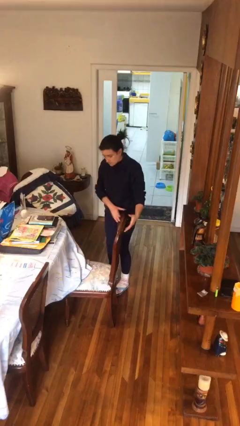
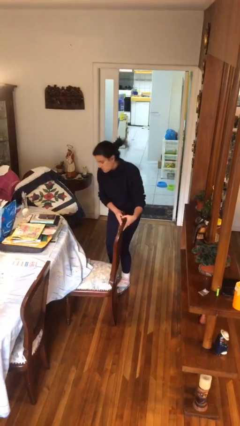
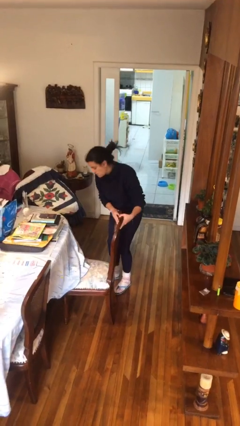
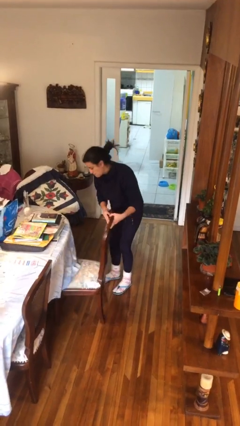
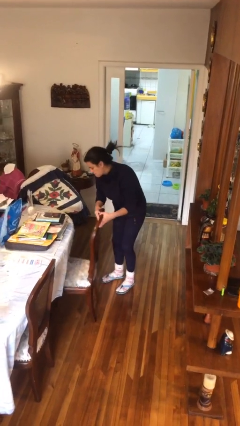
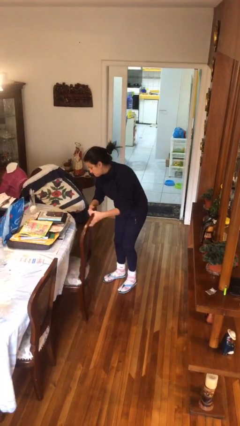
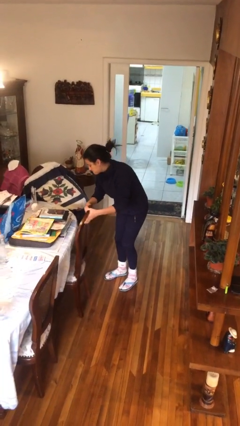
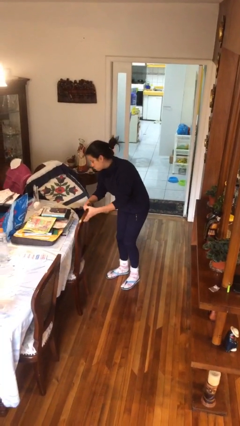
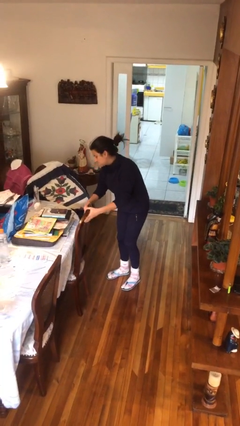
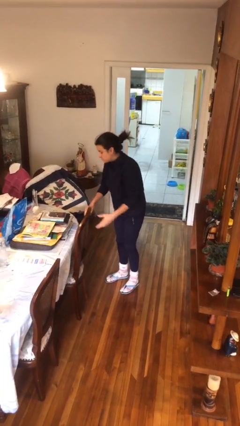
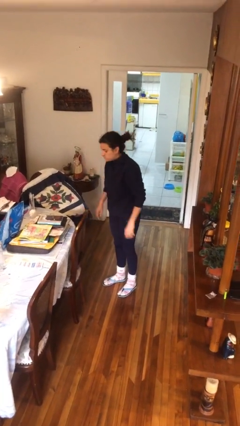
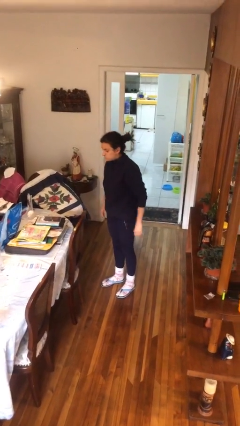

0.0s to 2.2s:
person pushes in chair

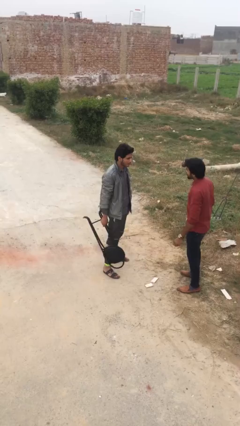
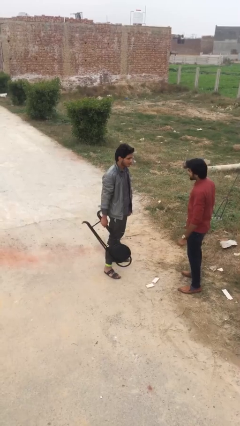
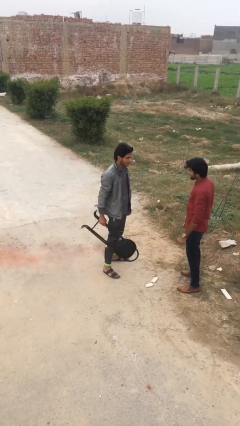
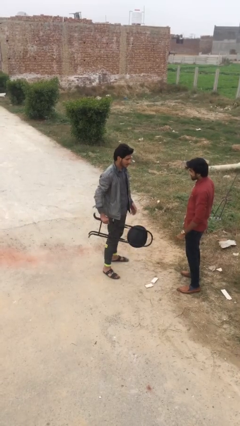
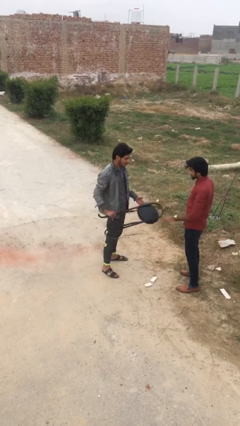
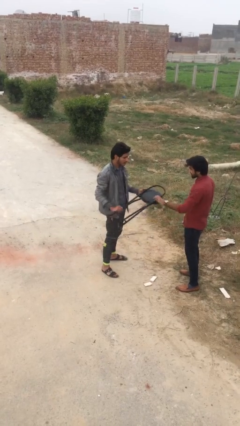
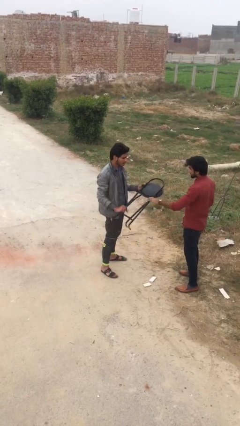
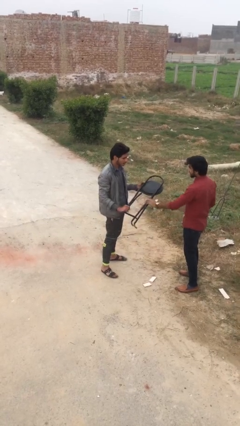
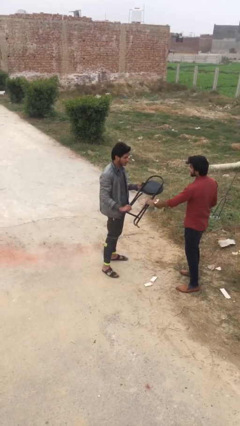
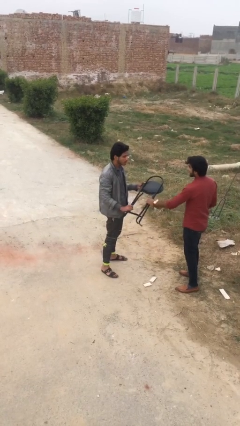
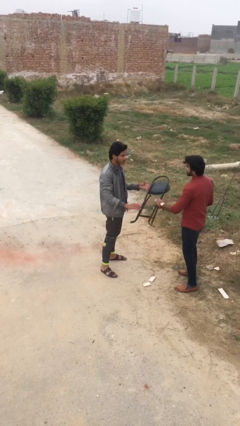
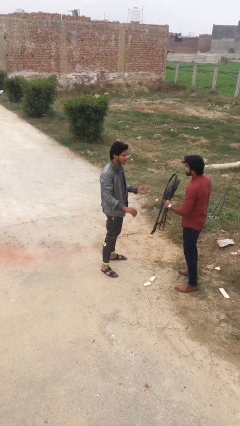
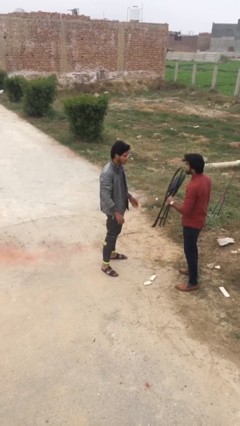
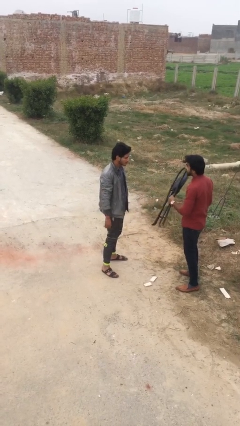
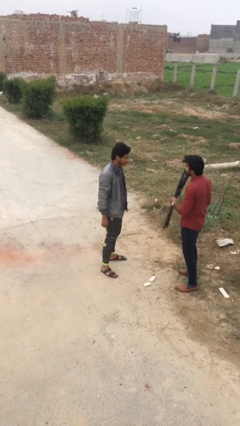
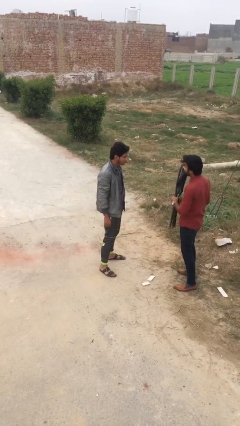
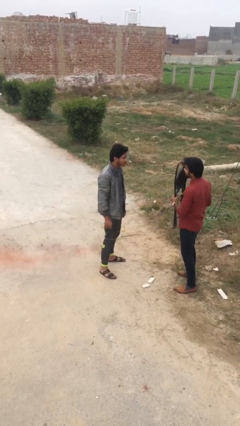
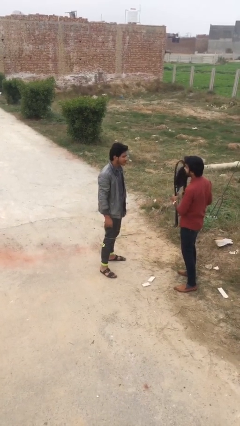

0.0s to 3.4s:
person transfers object to person

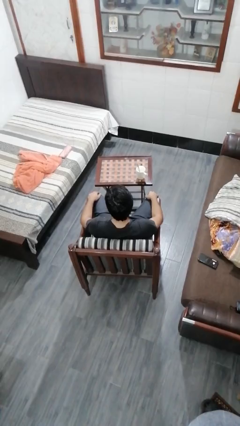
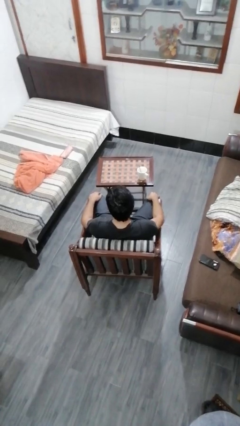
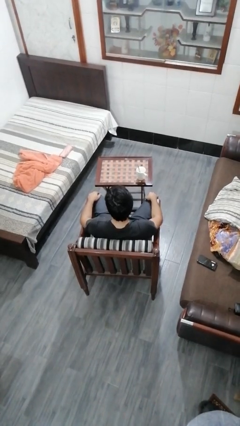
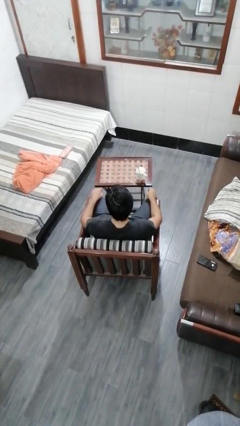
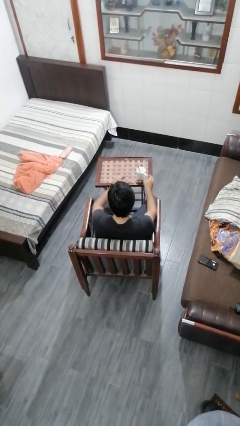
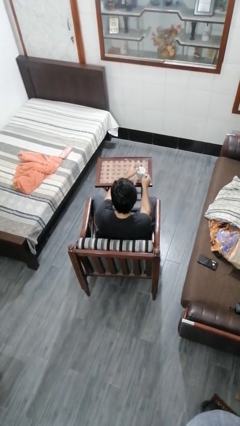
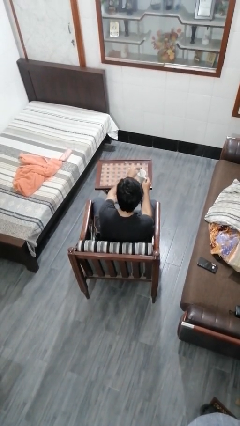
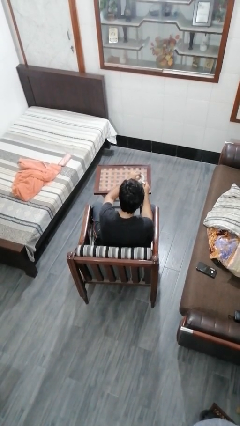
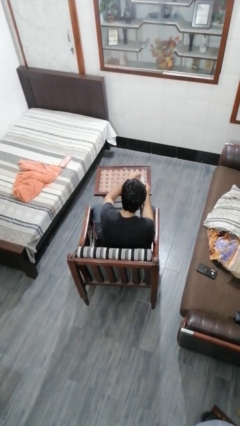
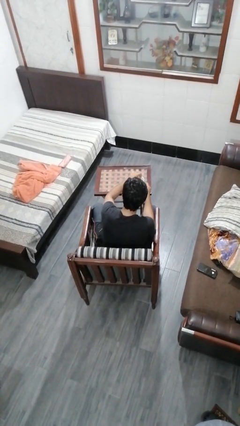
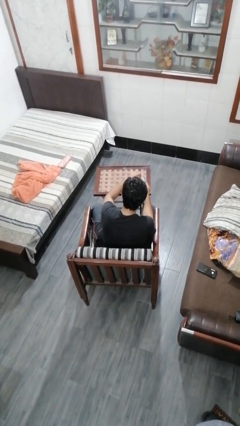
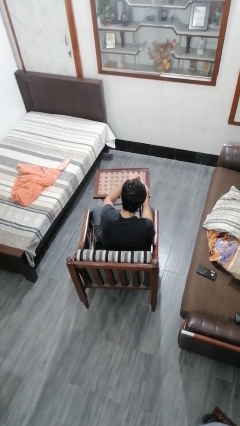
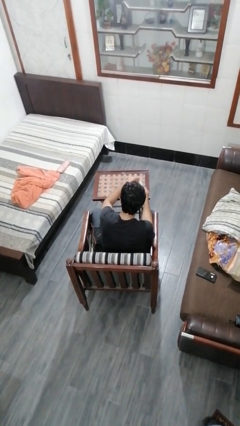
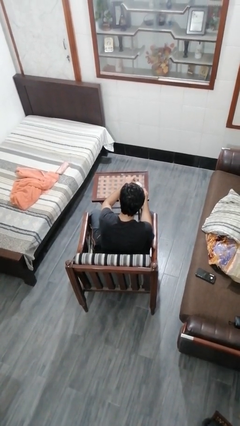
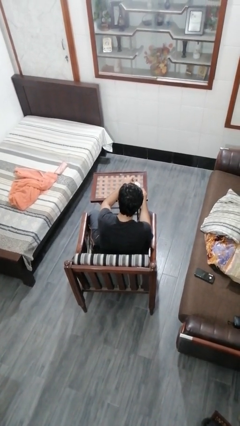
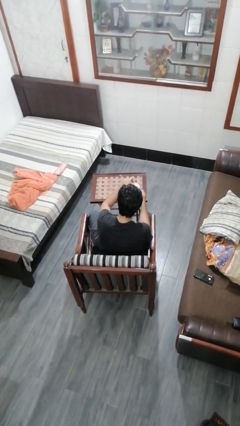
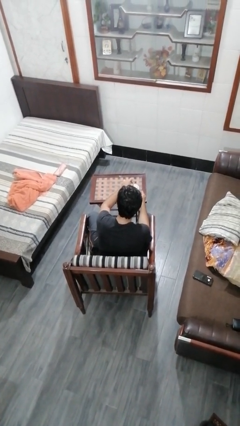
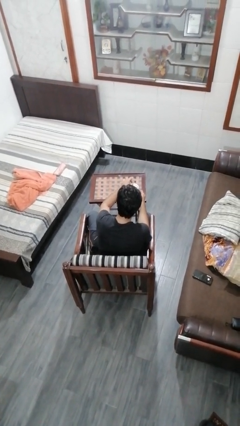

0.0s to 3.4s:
person stirs mug

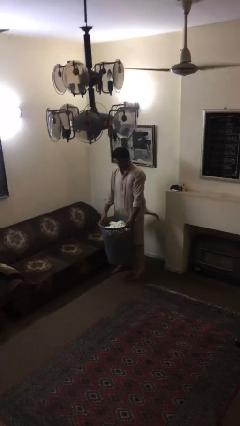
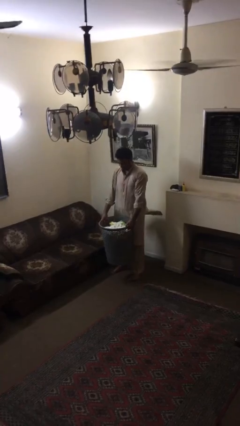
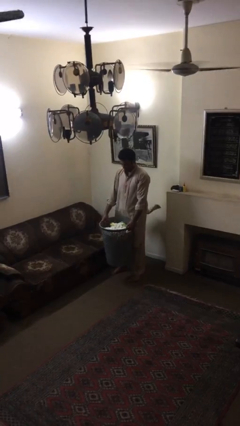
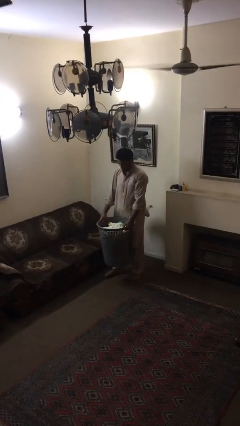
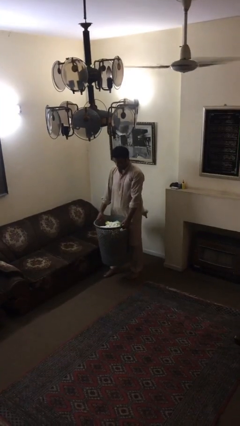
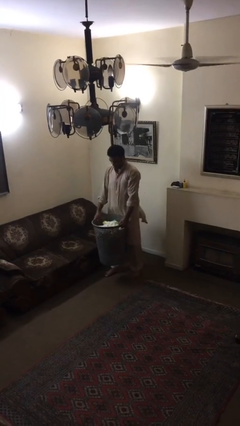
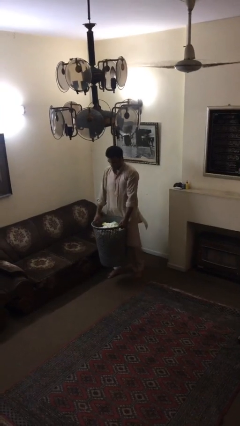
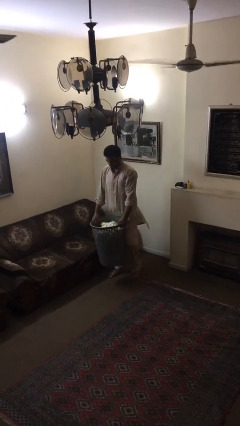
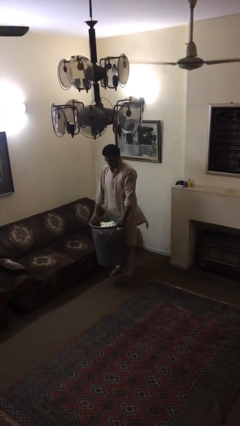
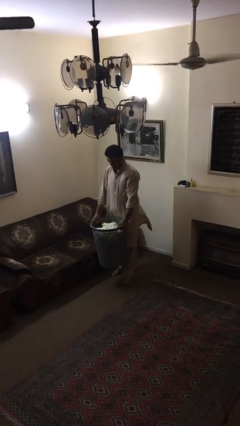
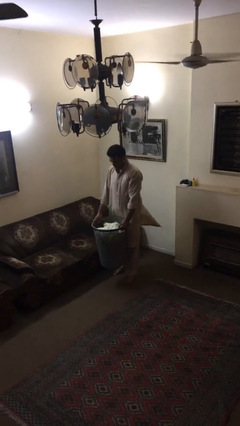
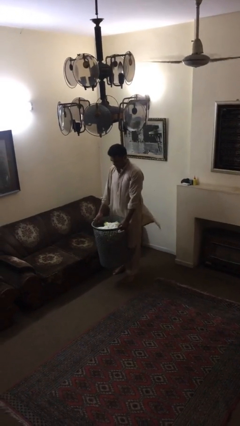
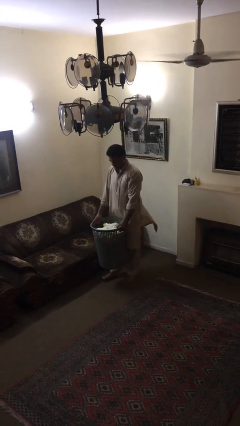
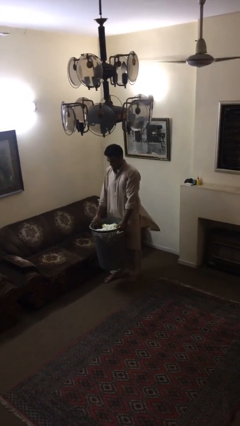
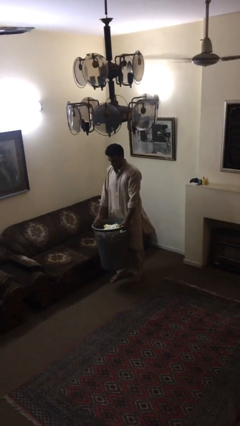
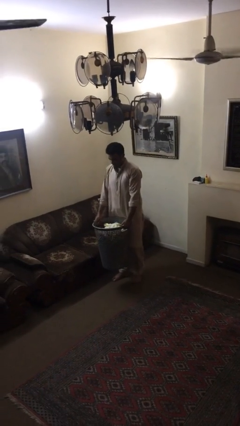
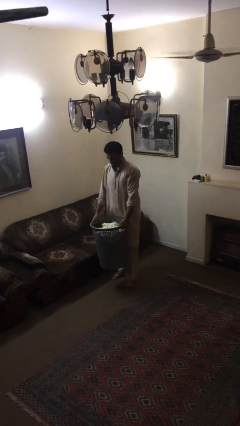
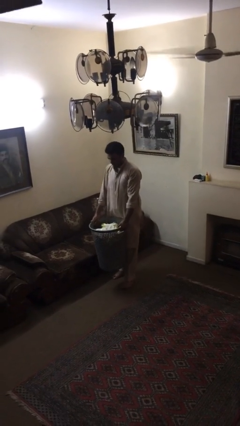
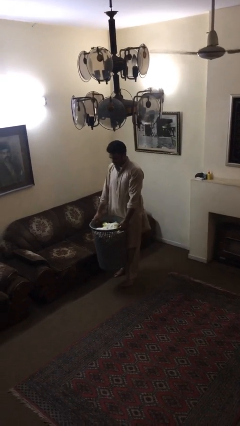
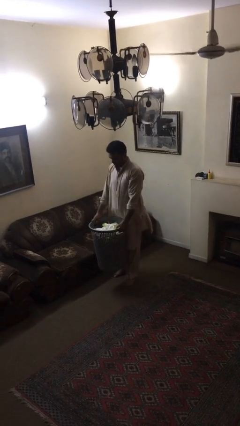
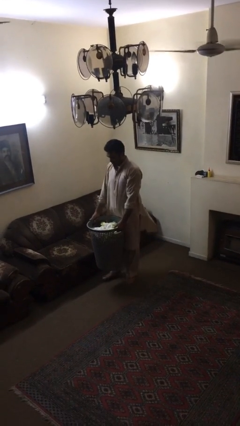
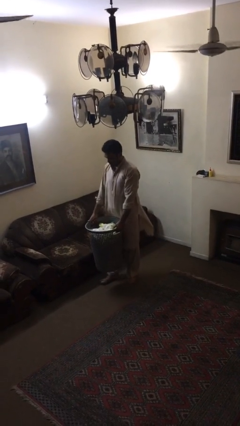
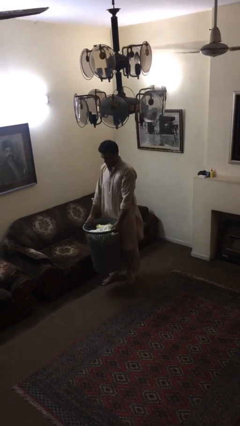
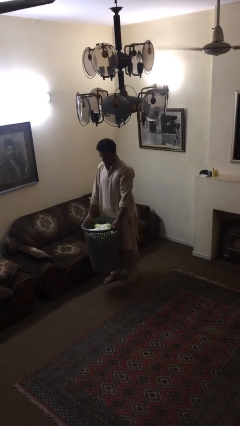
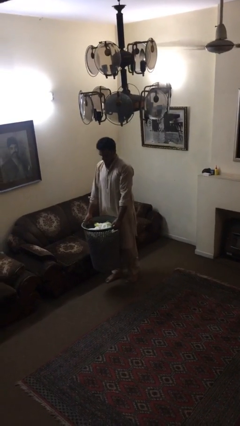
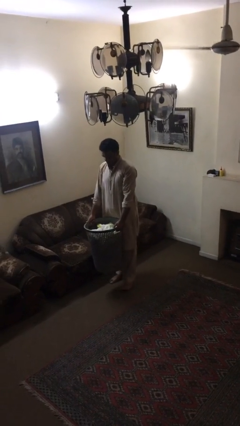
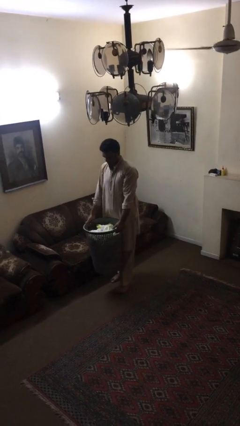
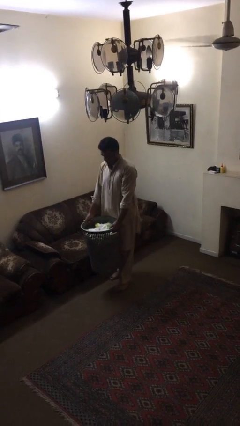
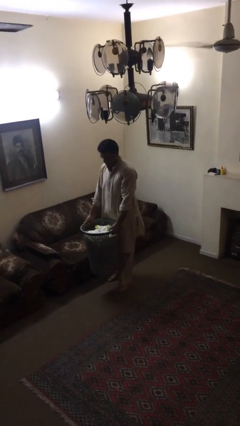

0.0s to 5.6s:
person carries heavy object

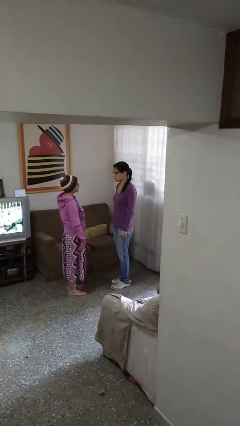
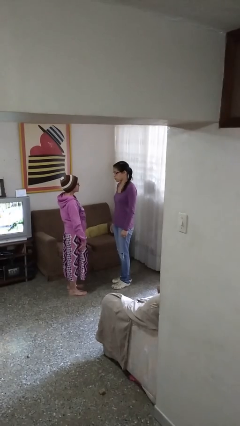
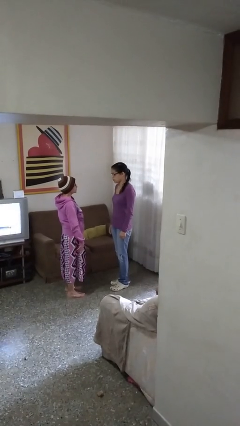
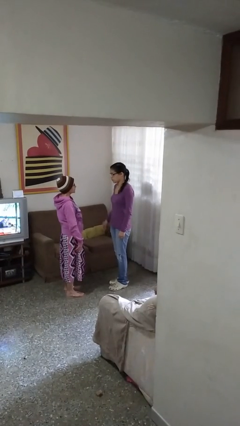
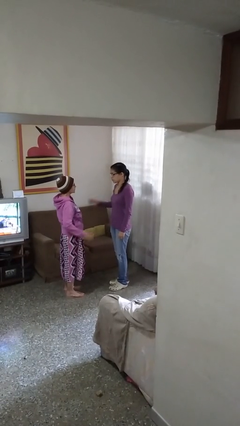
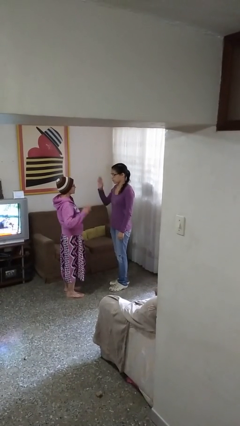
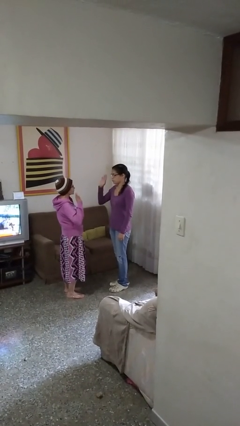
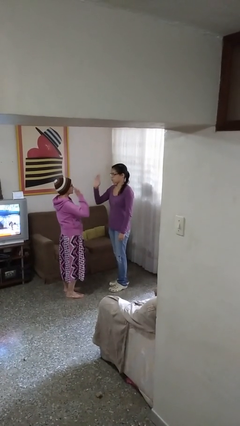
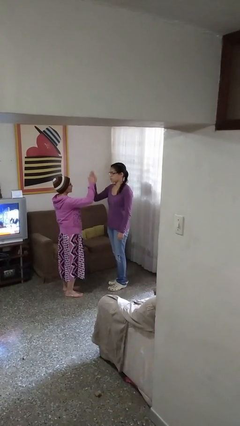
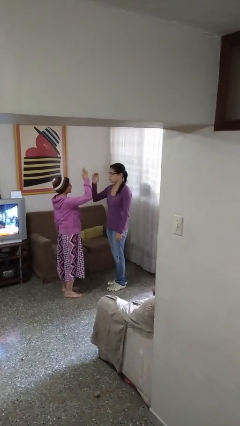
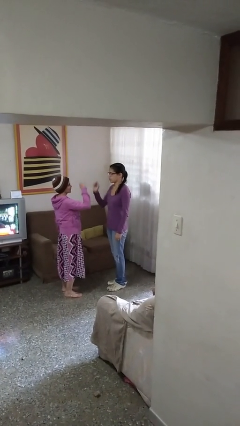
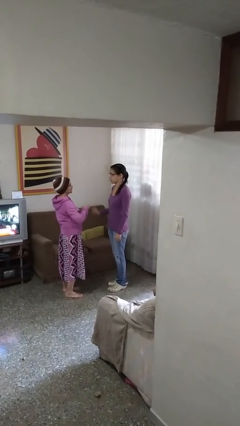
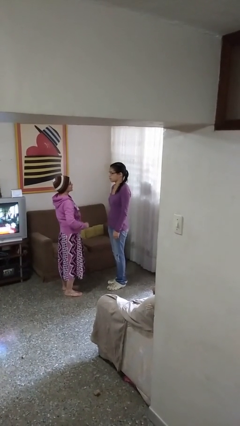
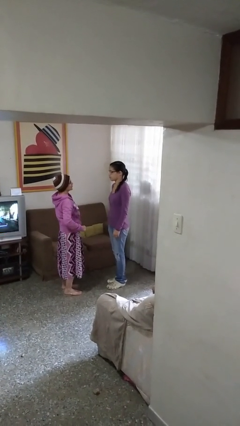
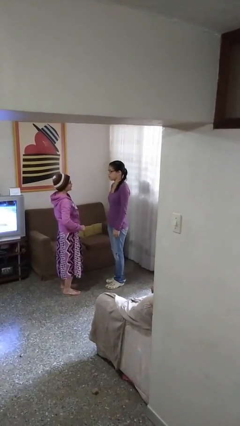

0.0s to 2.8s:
person highfives hand

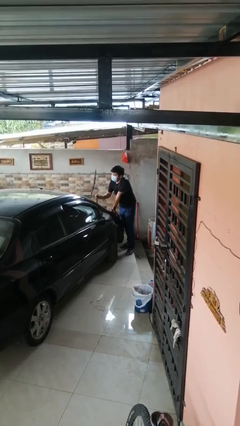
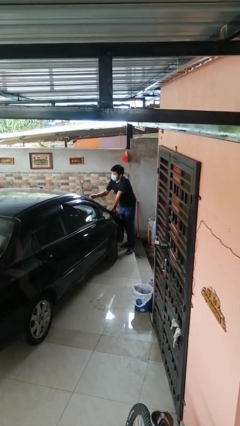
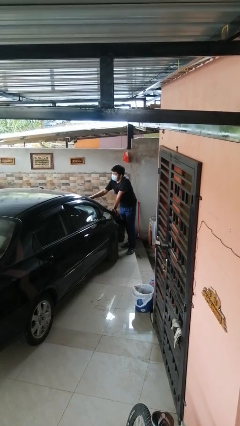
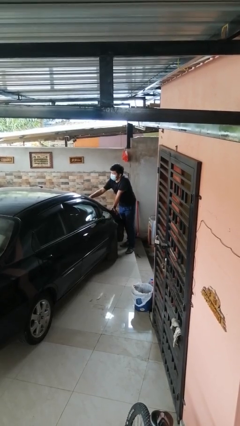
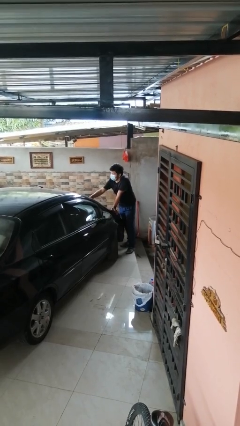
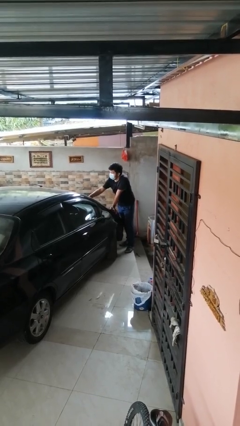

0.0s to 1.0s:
person flips down car wipers
